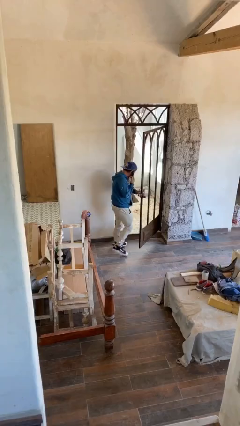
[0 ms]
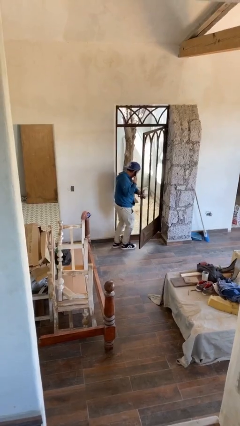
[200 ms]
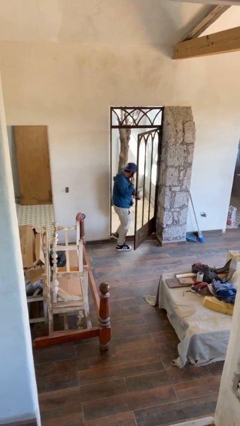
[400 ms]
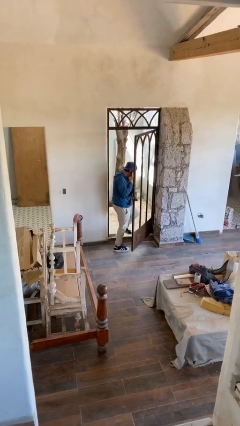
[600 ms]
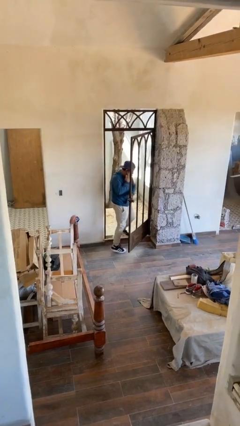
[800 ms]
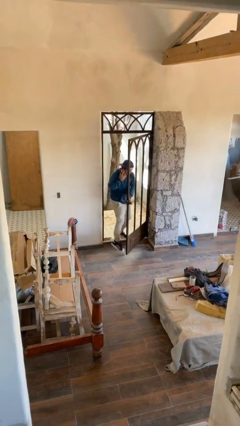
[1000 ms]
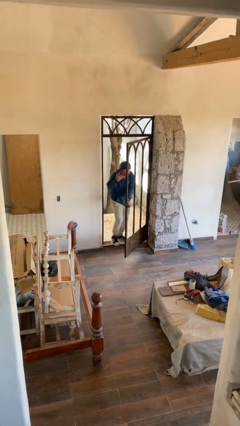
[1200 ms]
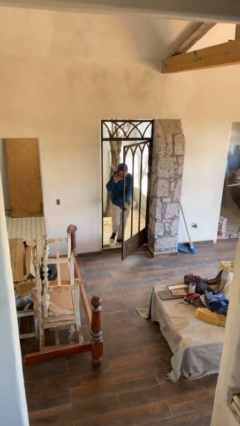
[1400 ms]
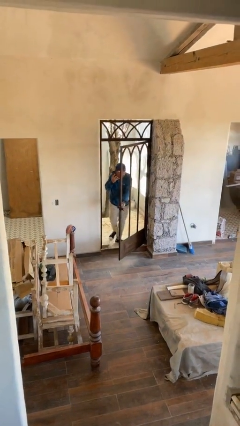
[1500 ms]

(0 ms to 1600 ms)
person exits scene through structure

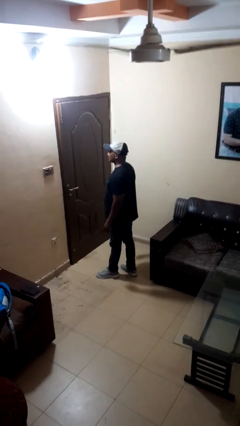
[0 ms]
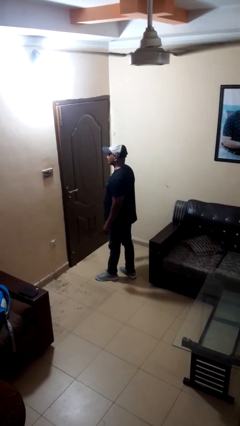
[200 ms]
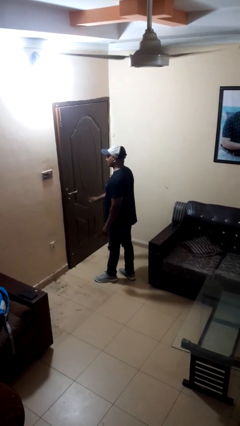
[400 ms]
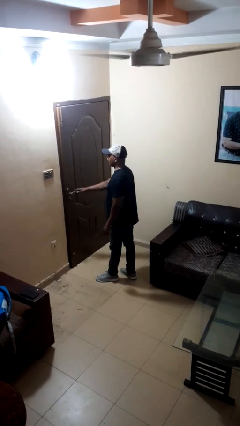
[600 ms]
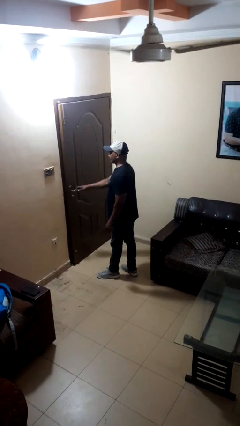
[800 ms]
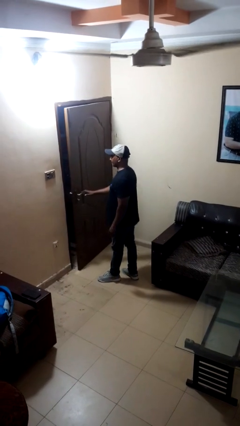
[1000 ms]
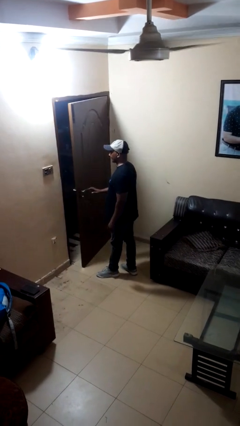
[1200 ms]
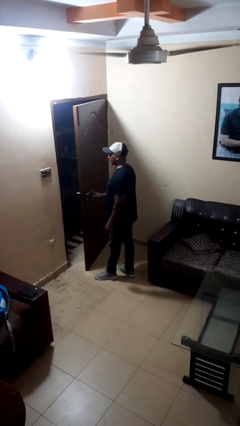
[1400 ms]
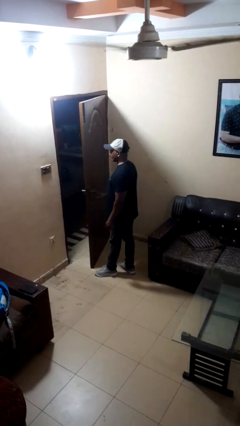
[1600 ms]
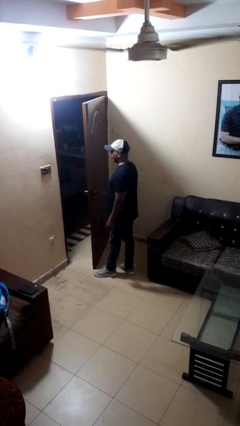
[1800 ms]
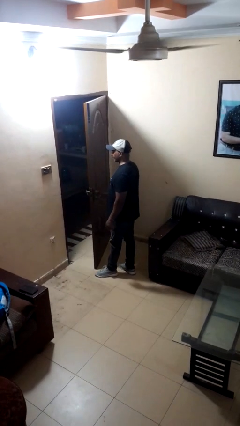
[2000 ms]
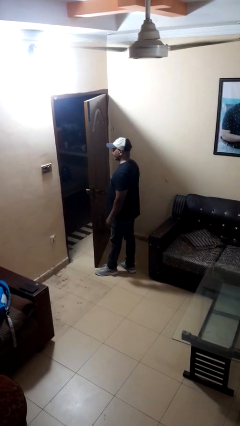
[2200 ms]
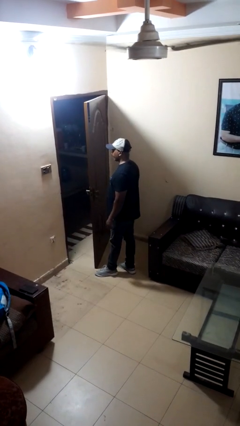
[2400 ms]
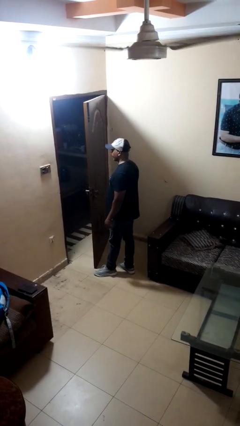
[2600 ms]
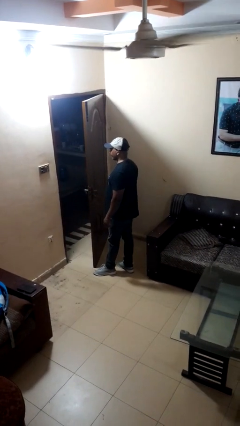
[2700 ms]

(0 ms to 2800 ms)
person opens facility door

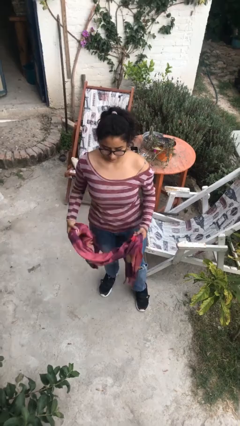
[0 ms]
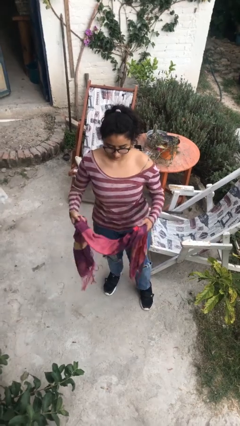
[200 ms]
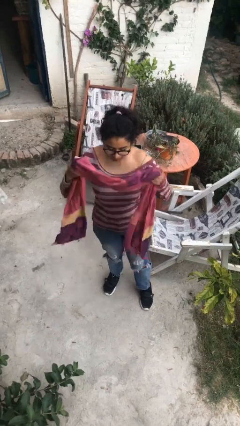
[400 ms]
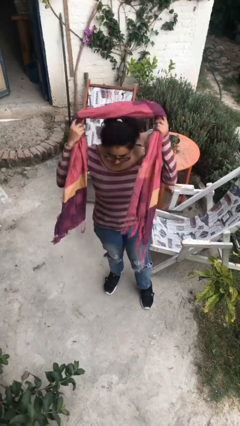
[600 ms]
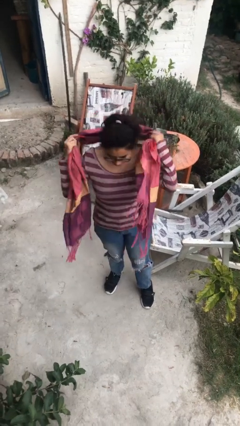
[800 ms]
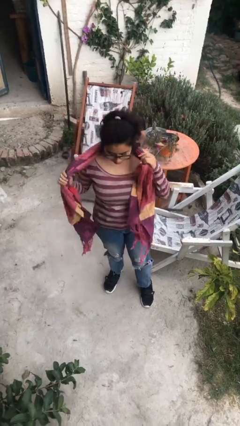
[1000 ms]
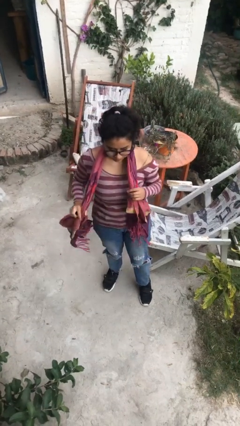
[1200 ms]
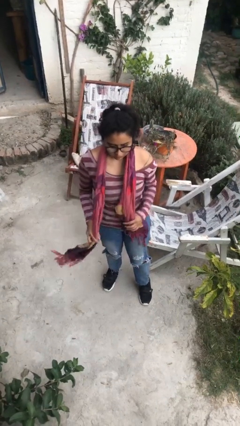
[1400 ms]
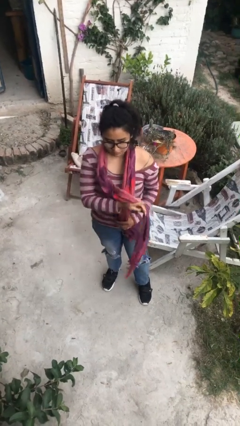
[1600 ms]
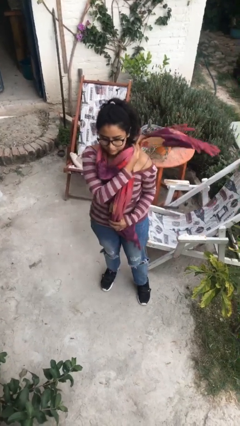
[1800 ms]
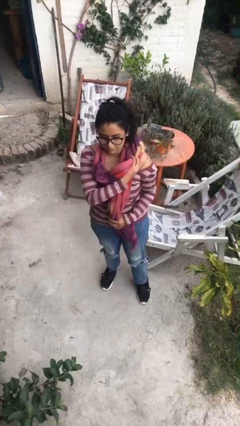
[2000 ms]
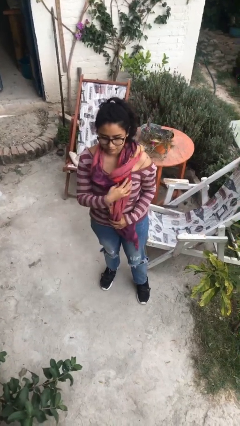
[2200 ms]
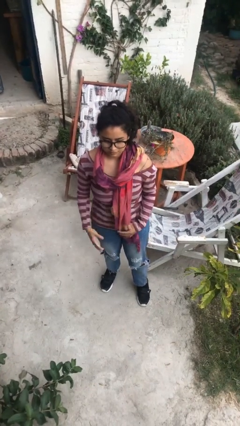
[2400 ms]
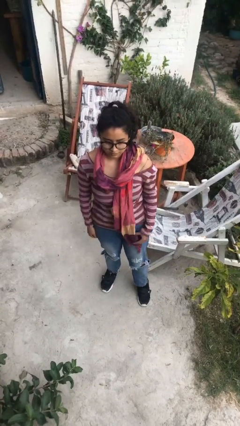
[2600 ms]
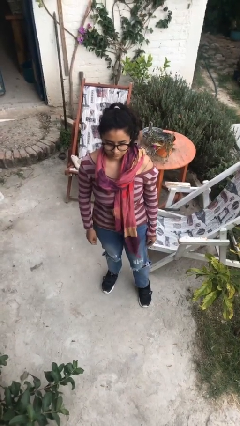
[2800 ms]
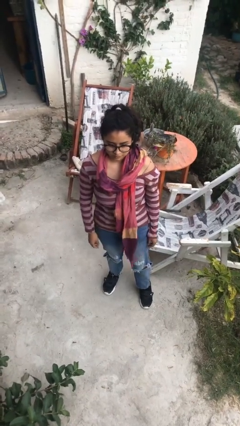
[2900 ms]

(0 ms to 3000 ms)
person puts on scarf

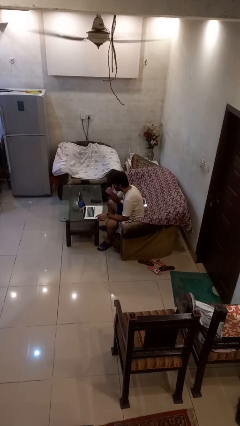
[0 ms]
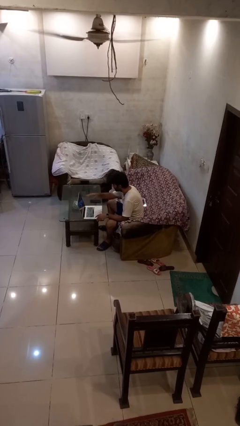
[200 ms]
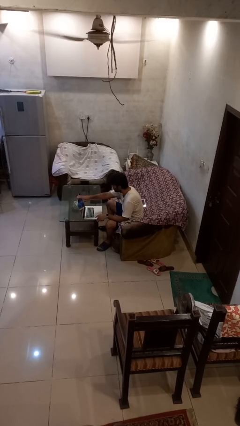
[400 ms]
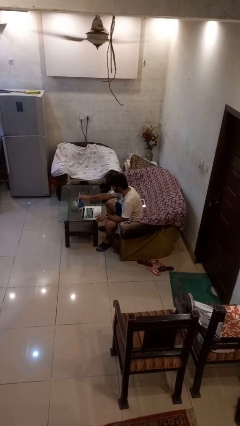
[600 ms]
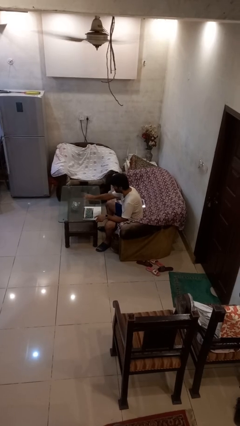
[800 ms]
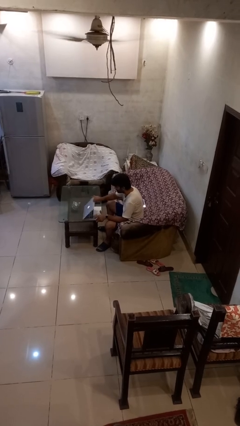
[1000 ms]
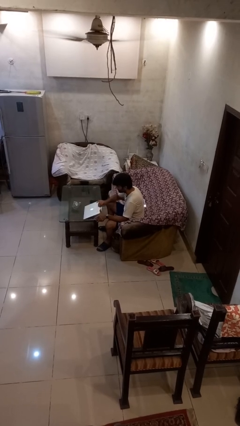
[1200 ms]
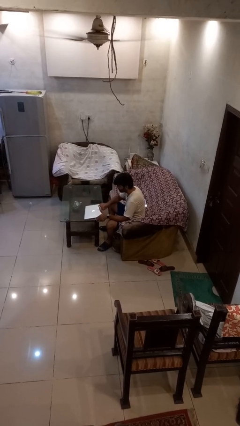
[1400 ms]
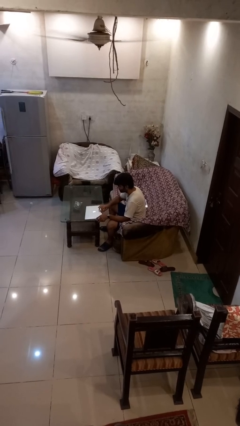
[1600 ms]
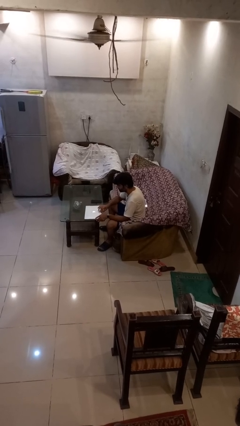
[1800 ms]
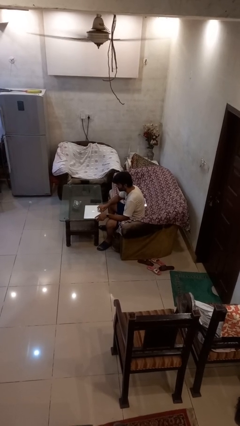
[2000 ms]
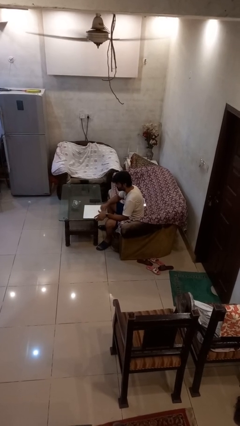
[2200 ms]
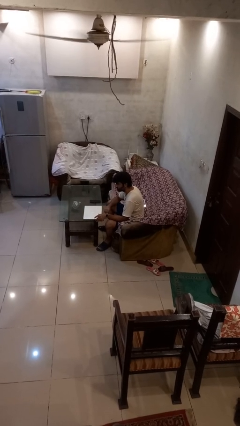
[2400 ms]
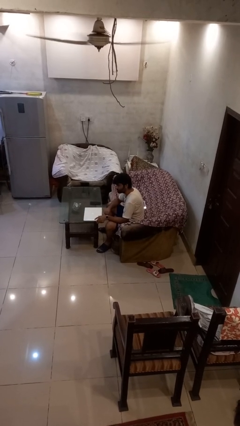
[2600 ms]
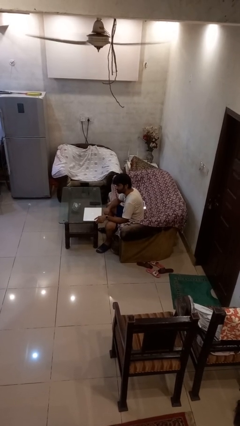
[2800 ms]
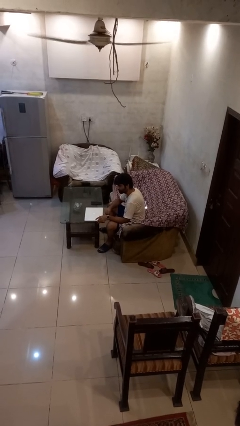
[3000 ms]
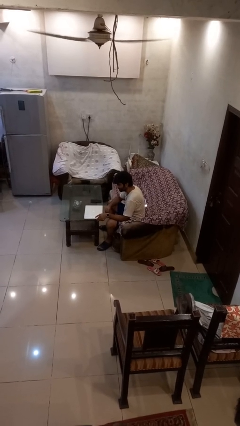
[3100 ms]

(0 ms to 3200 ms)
person closes laptop

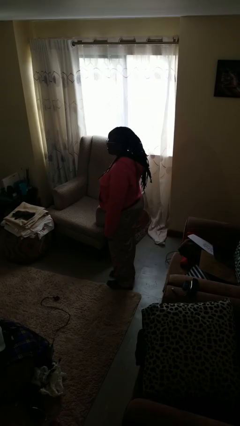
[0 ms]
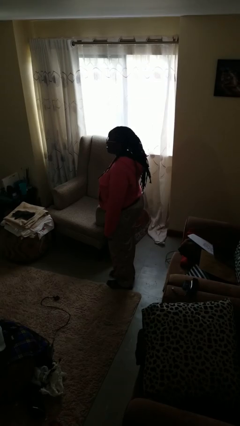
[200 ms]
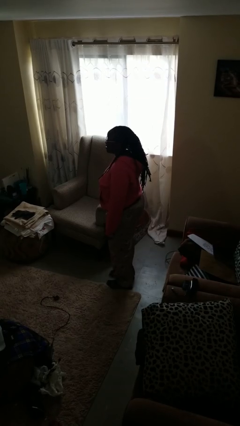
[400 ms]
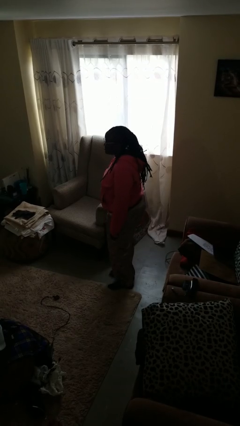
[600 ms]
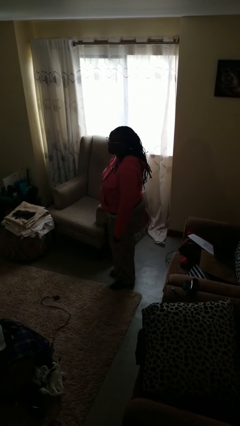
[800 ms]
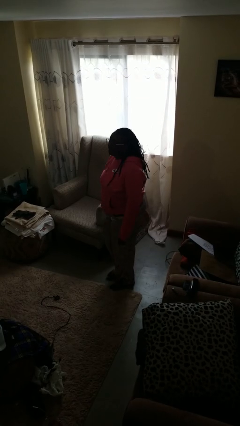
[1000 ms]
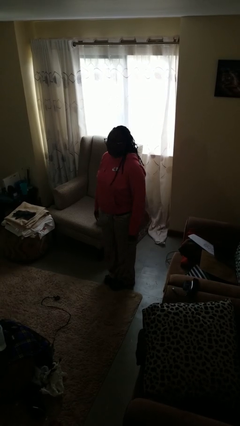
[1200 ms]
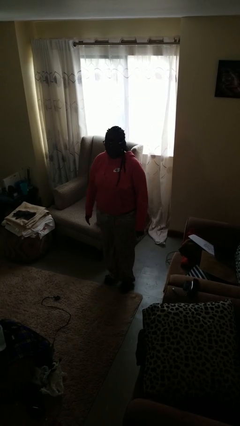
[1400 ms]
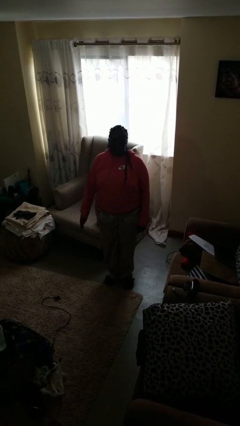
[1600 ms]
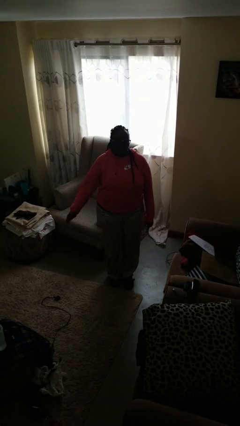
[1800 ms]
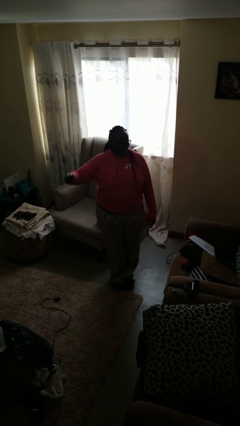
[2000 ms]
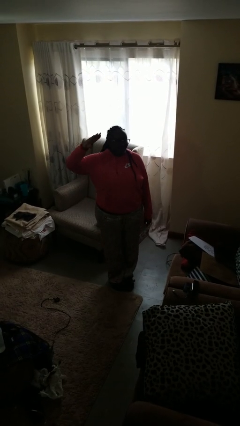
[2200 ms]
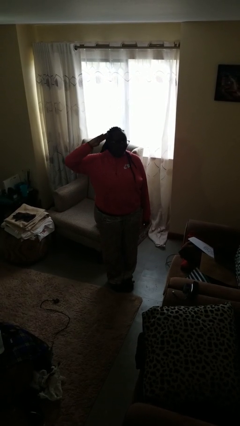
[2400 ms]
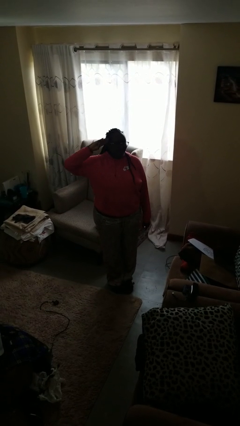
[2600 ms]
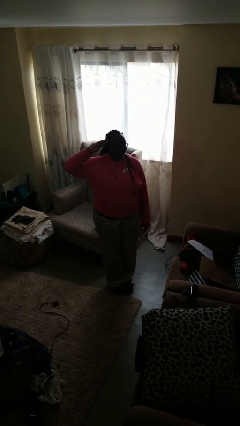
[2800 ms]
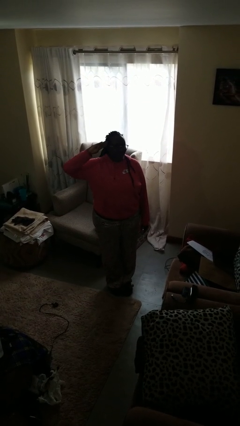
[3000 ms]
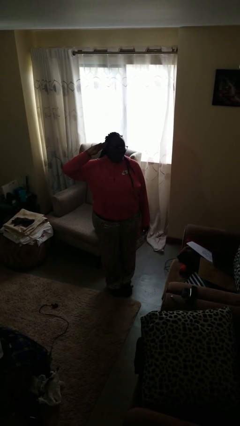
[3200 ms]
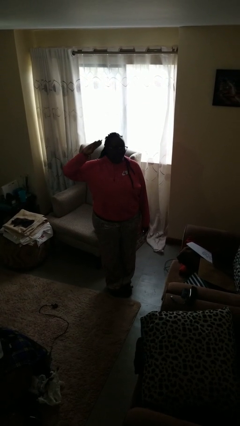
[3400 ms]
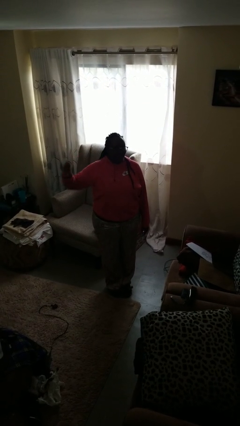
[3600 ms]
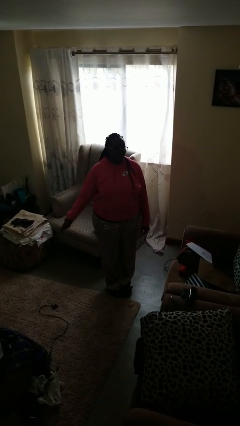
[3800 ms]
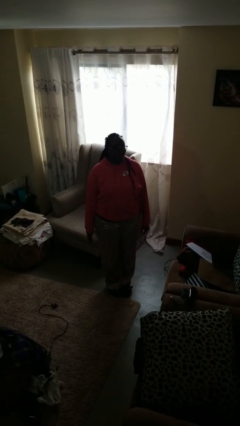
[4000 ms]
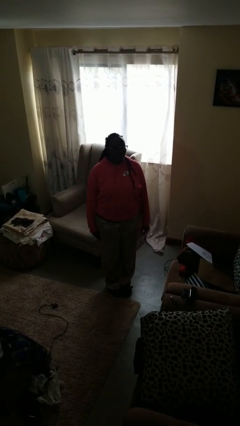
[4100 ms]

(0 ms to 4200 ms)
person salutes

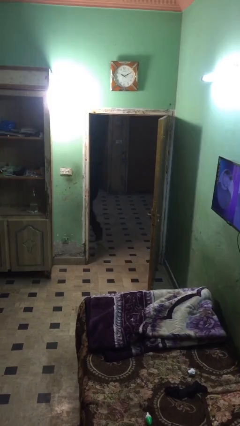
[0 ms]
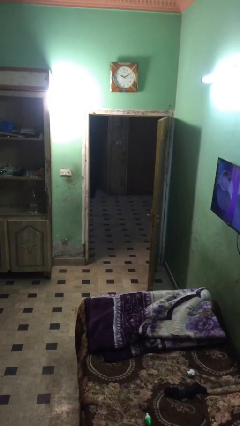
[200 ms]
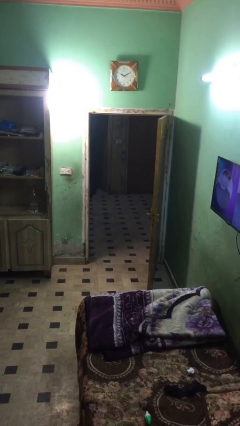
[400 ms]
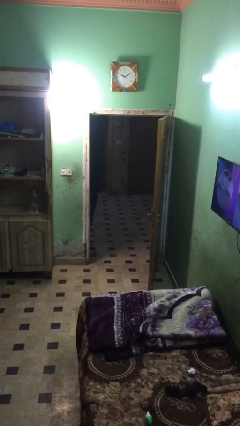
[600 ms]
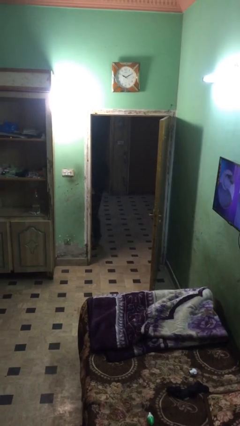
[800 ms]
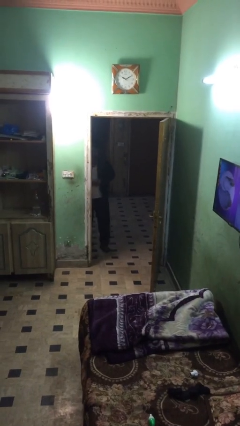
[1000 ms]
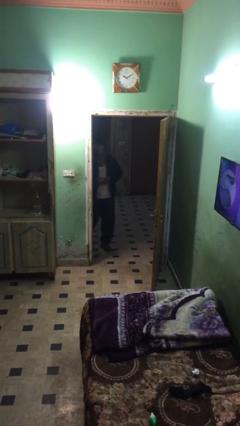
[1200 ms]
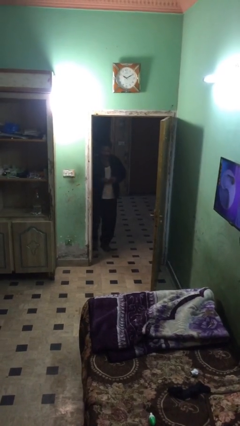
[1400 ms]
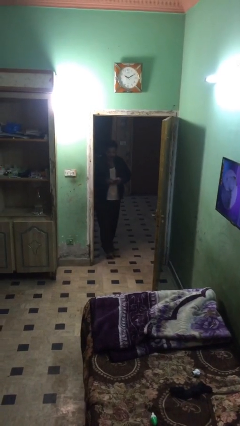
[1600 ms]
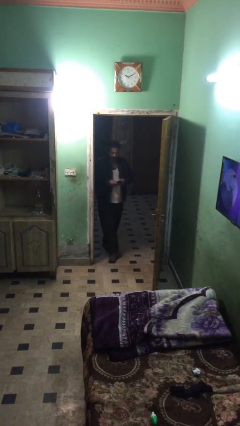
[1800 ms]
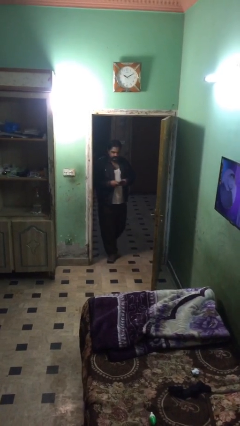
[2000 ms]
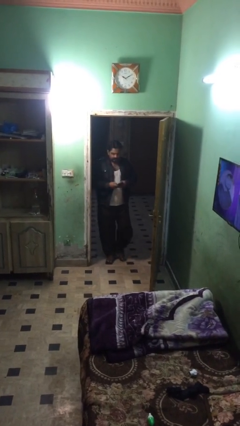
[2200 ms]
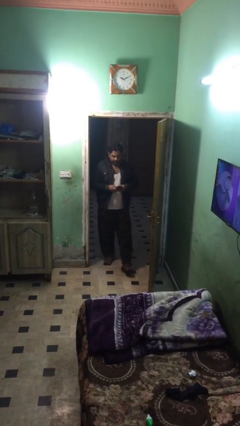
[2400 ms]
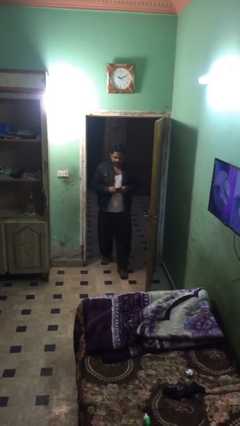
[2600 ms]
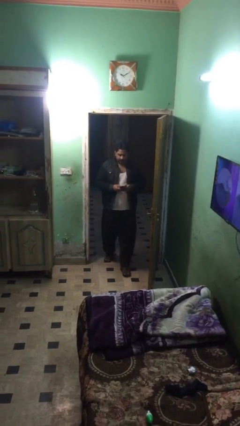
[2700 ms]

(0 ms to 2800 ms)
person enters scene through structure
